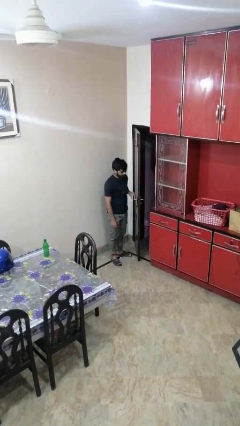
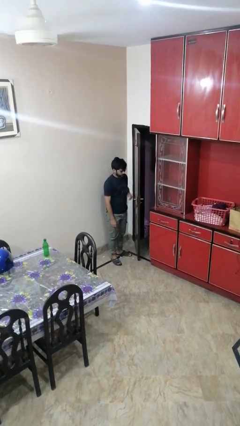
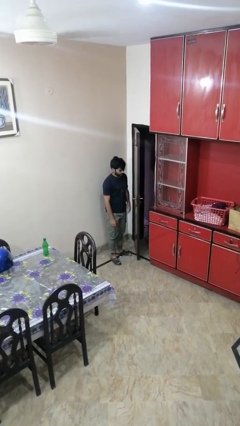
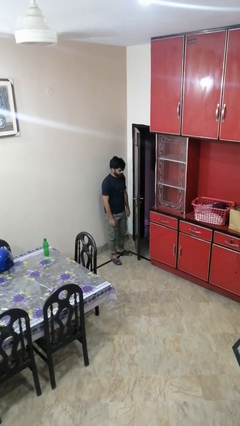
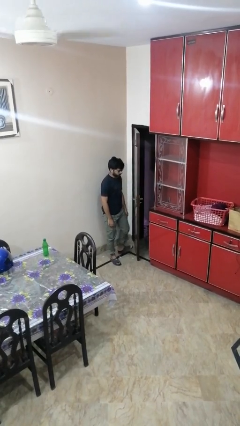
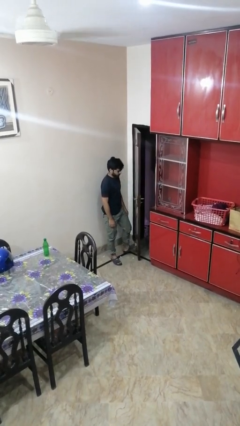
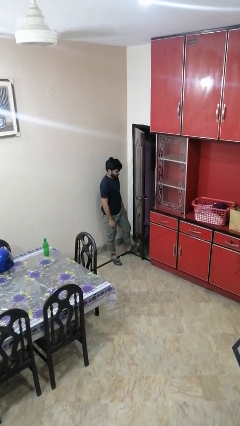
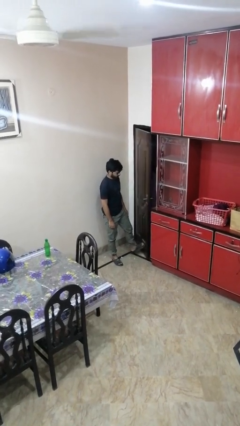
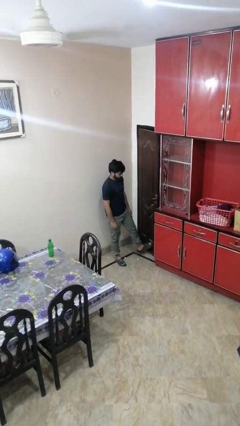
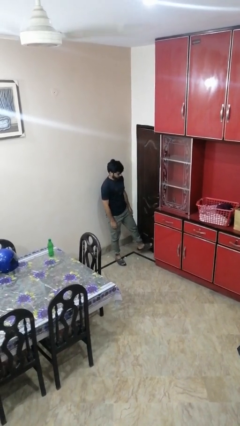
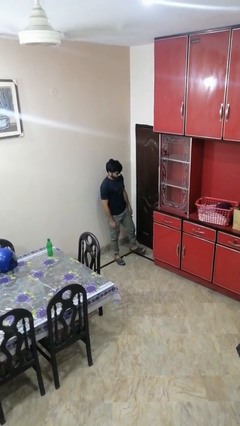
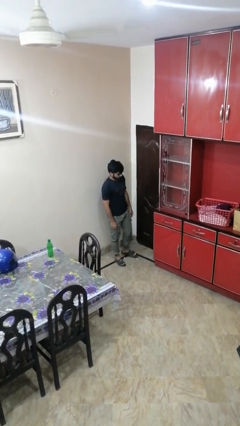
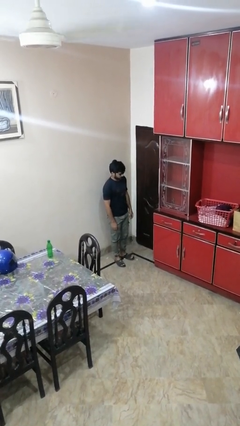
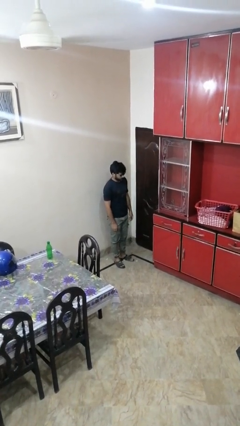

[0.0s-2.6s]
person closes door with foot

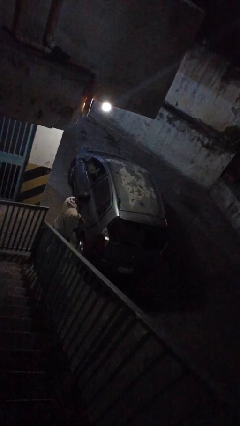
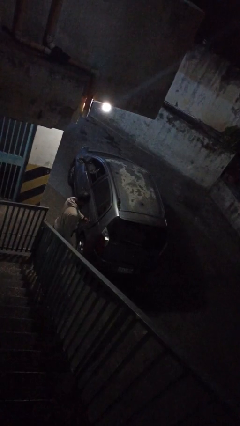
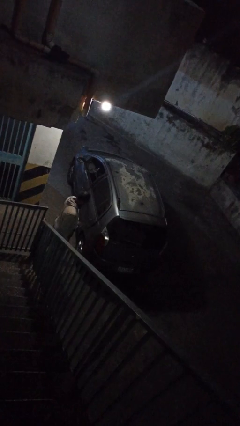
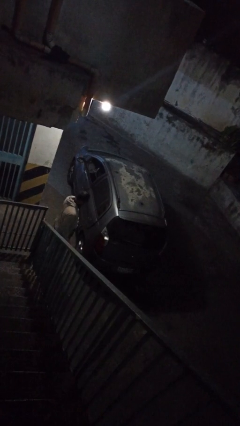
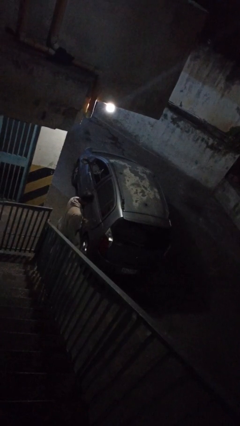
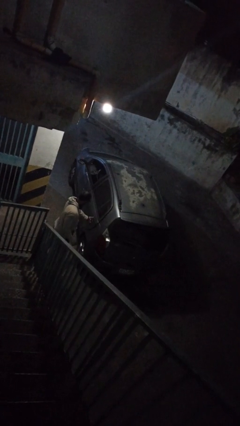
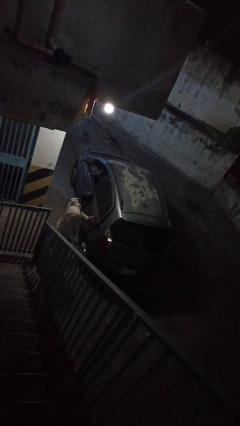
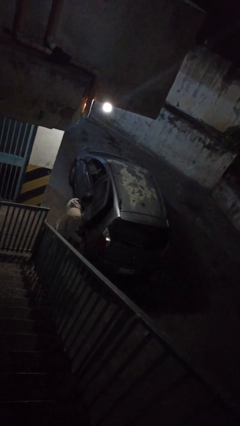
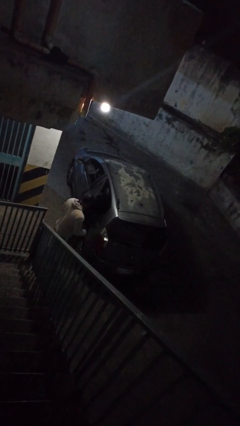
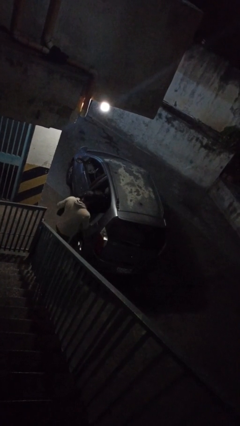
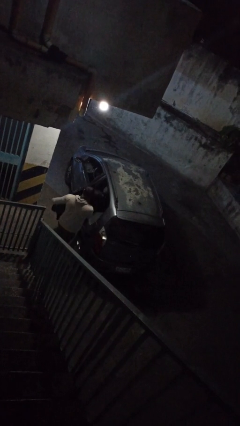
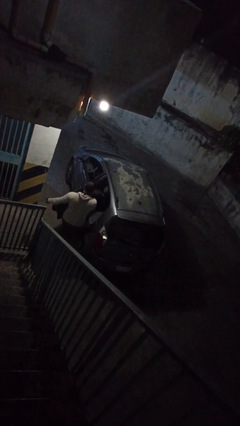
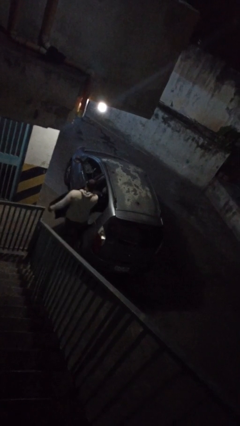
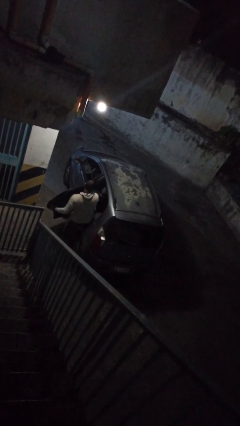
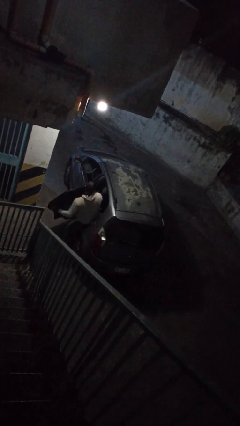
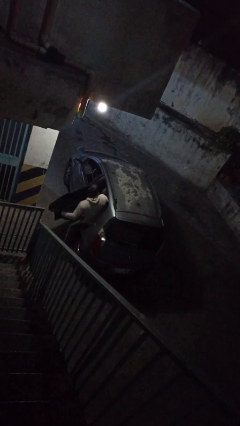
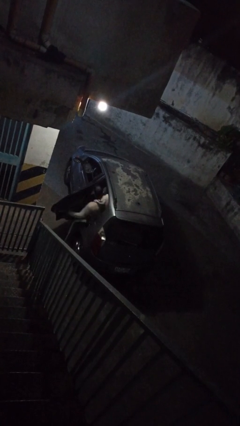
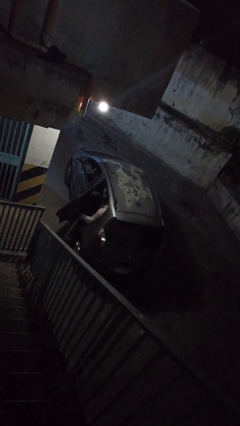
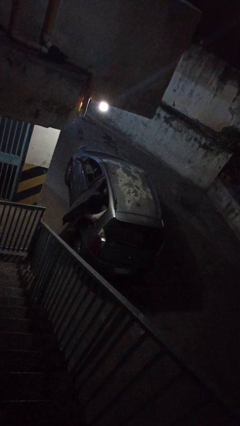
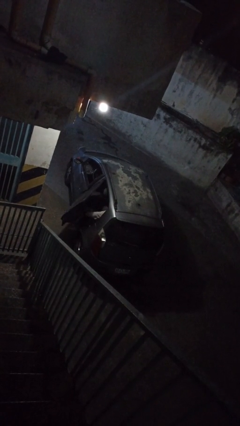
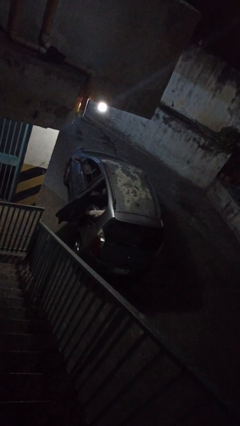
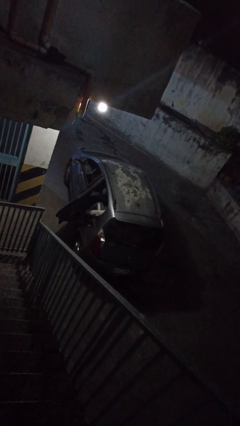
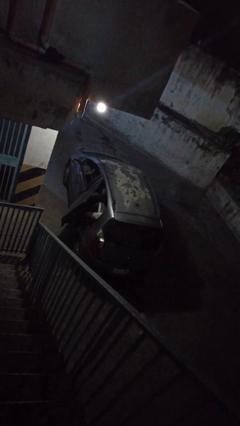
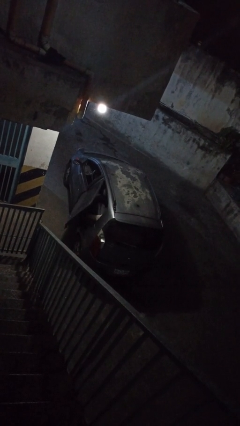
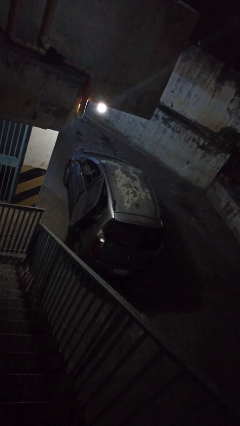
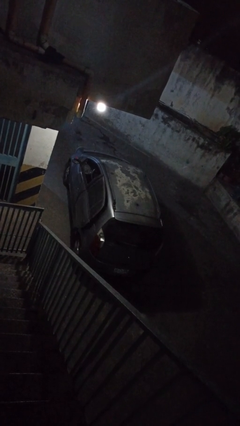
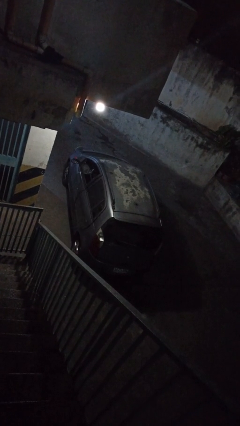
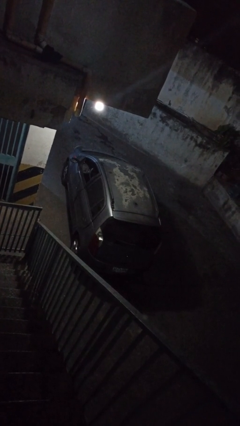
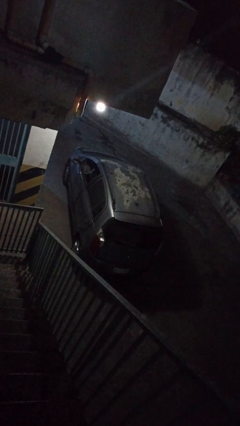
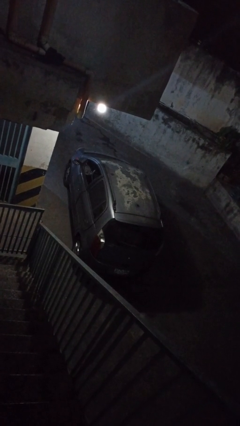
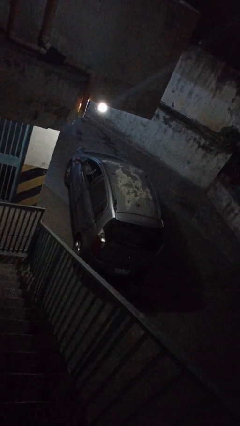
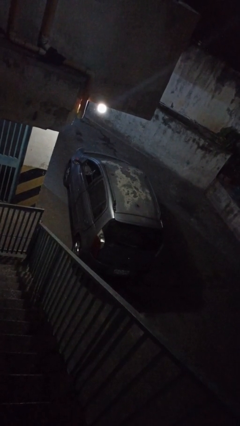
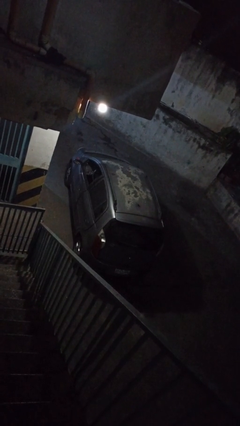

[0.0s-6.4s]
car picks up person

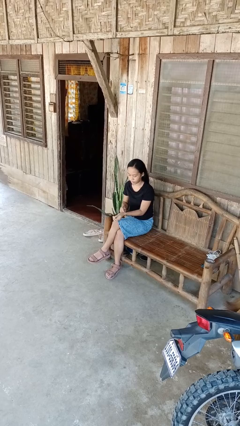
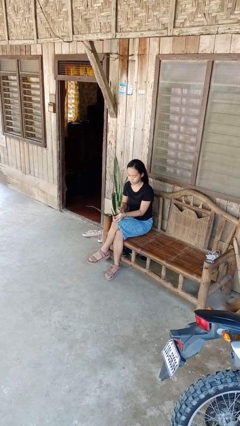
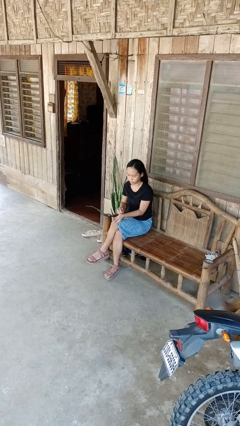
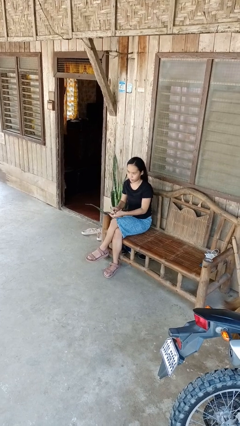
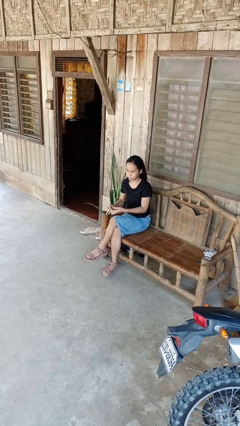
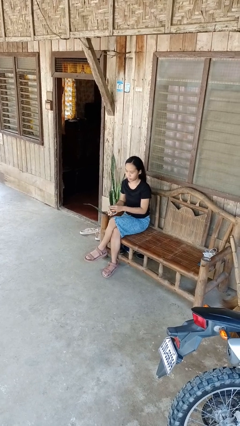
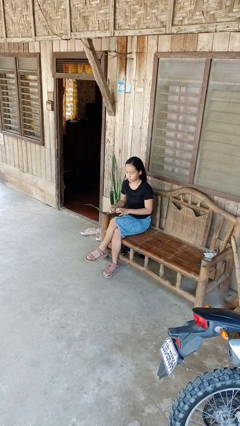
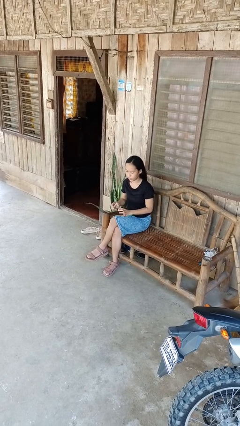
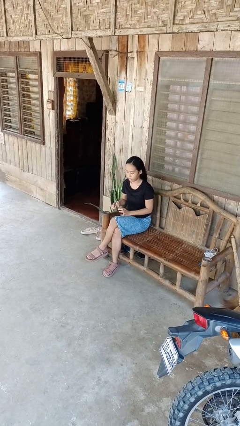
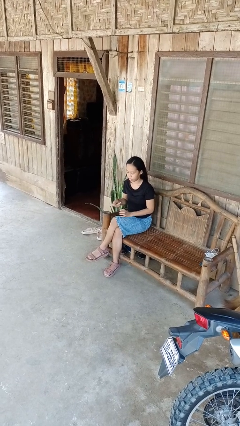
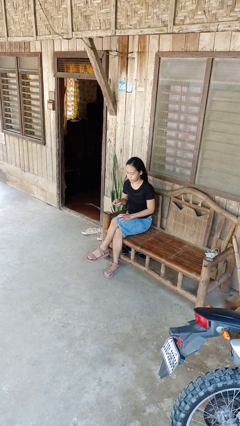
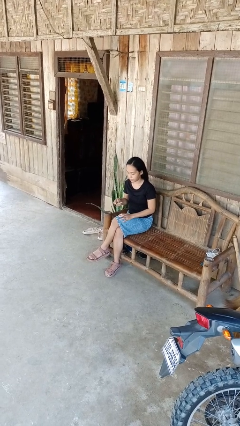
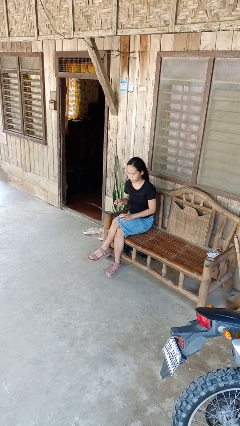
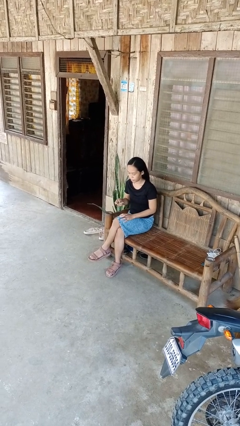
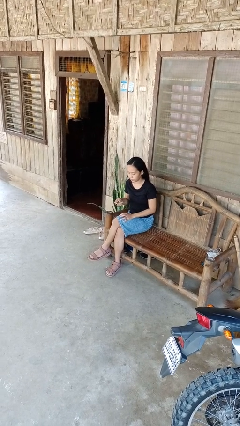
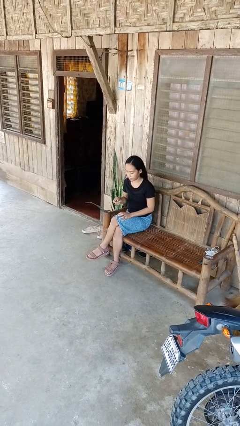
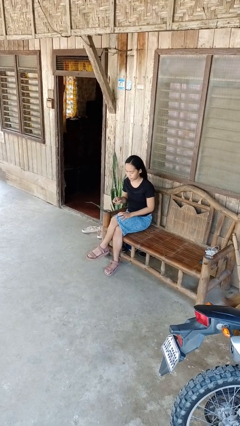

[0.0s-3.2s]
person takes off wristwatch

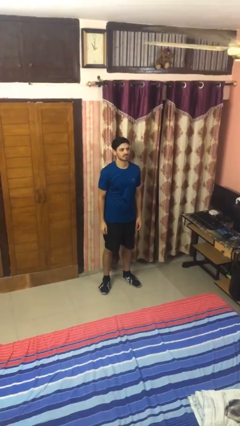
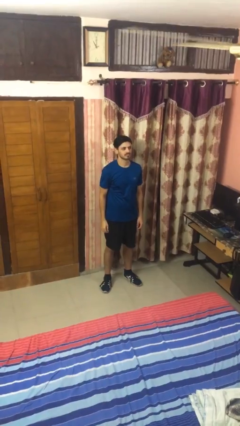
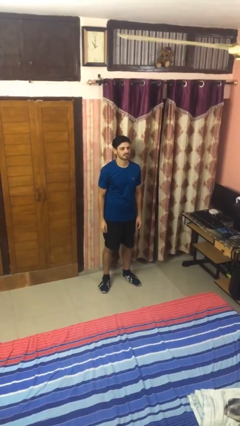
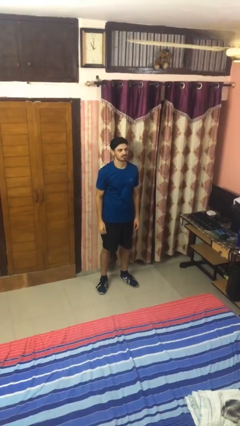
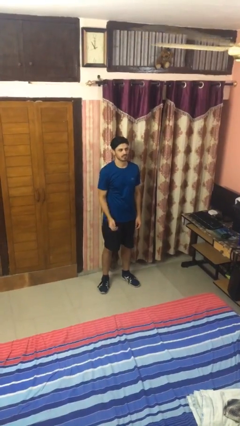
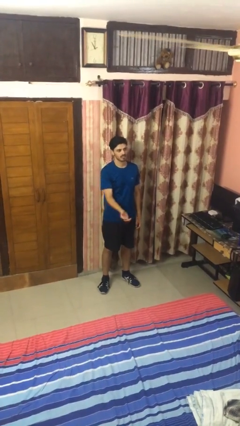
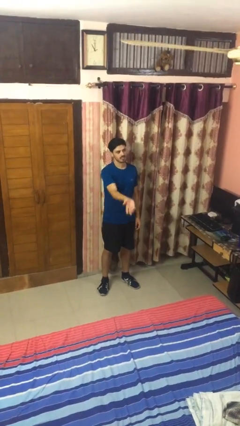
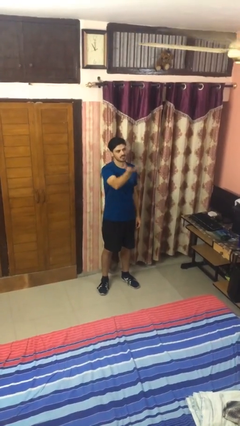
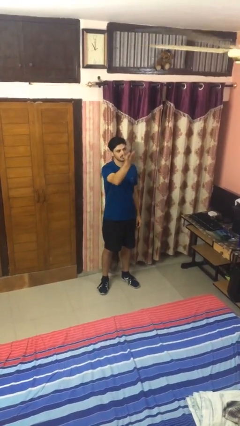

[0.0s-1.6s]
person gestures swipe up

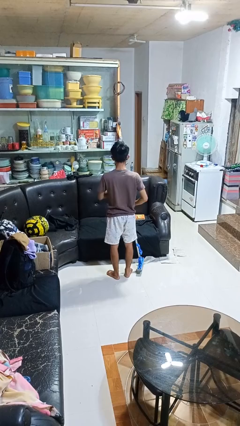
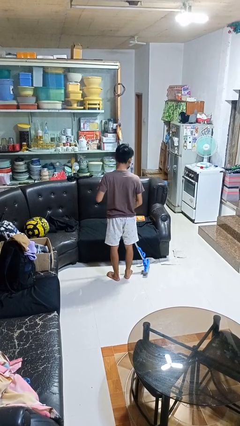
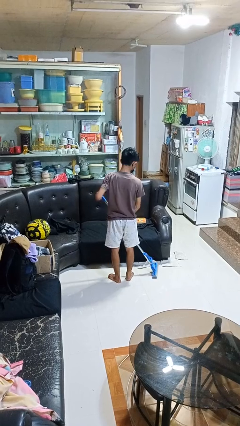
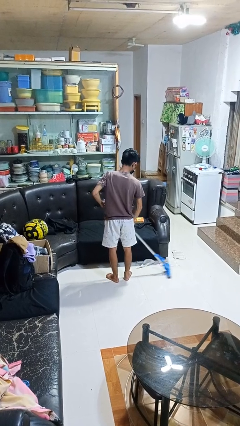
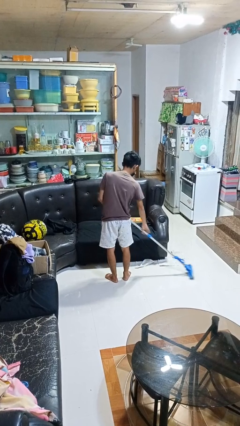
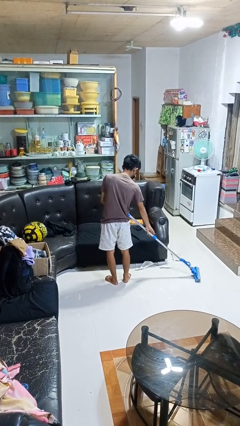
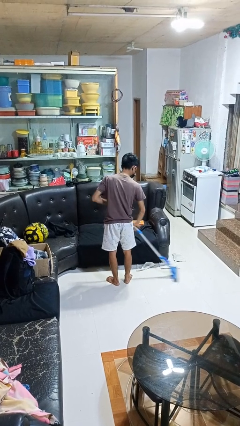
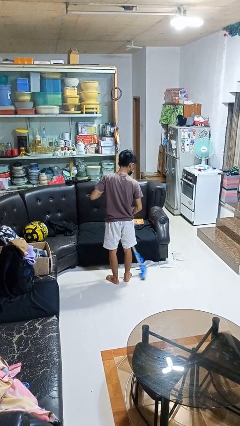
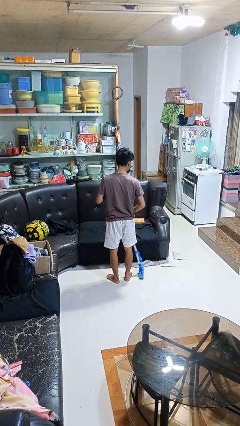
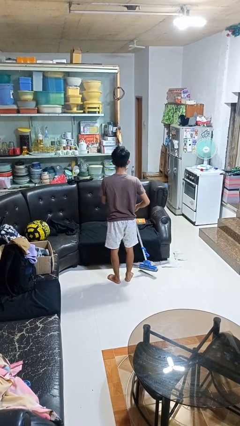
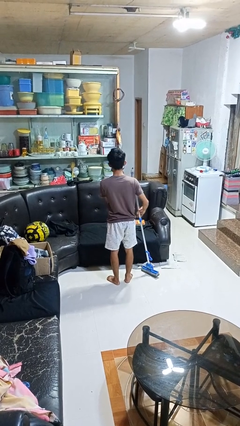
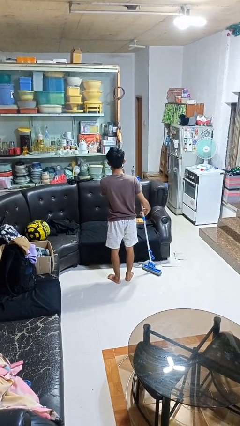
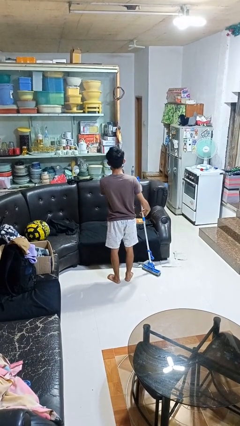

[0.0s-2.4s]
person mops

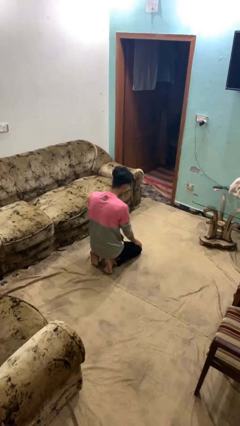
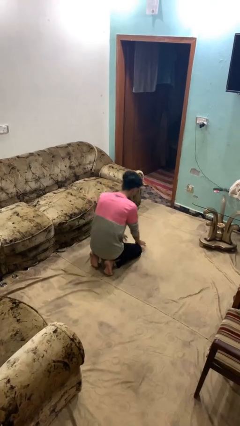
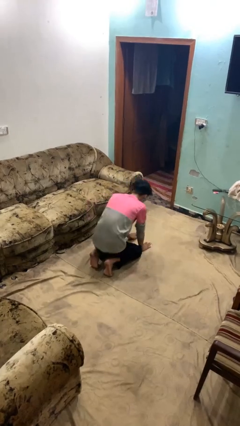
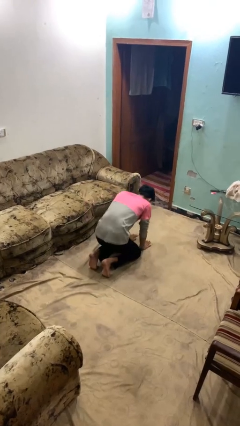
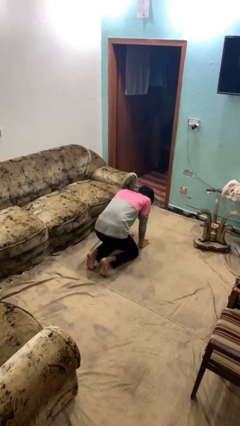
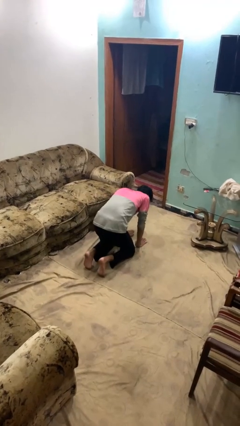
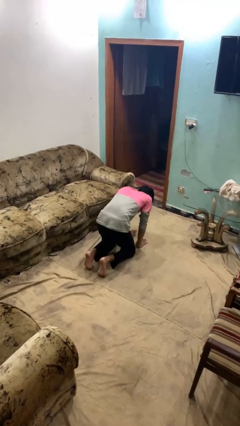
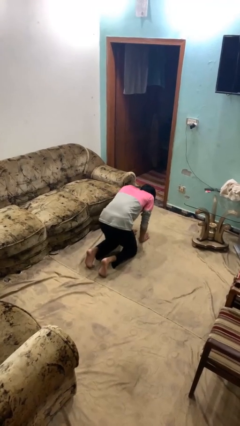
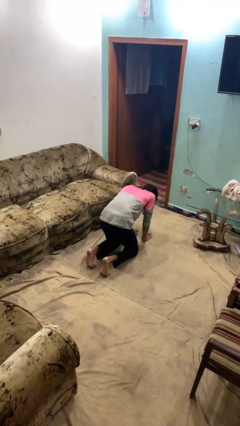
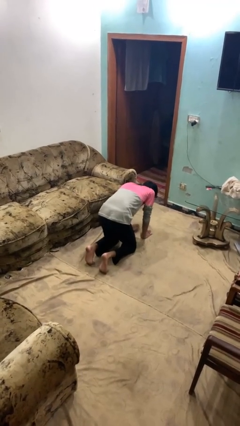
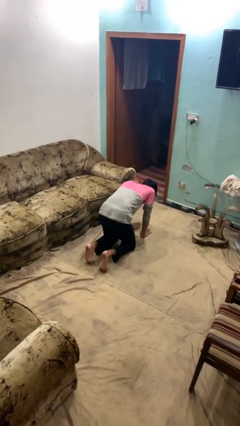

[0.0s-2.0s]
person crawls
